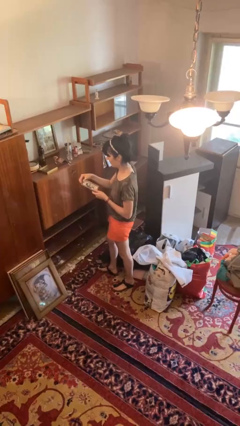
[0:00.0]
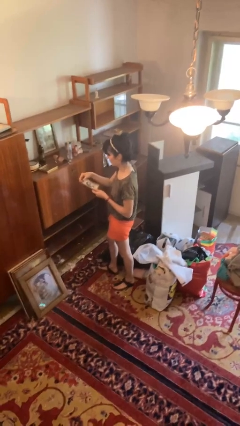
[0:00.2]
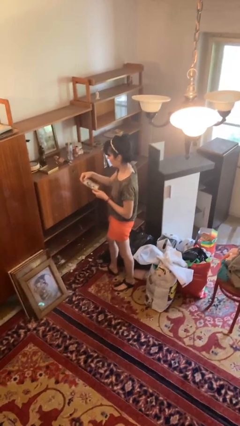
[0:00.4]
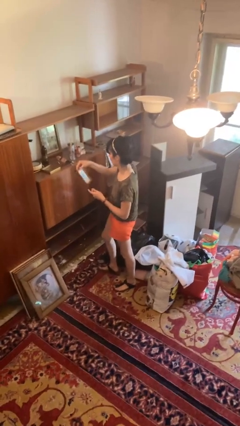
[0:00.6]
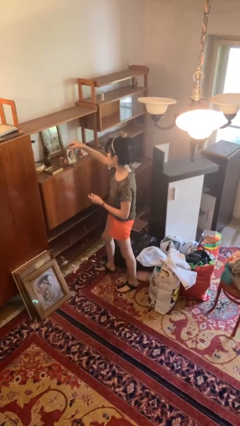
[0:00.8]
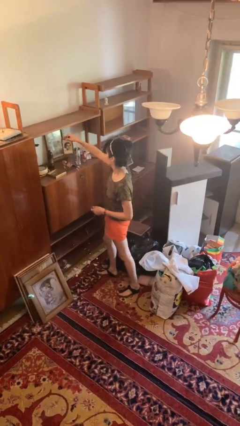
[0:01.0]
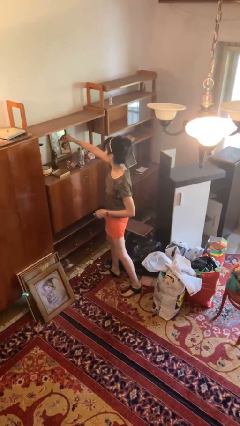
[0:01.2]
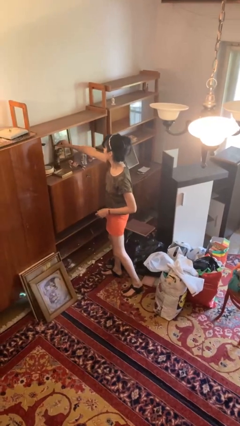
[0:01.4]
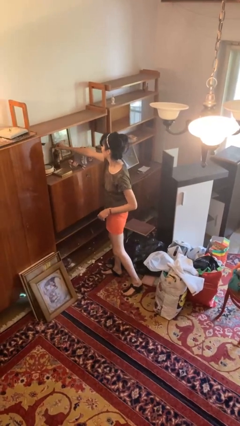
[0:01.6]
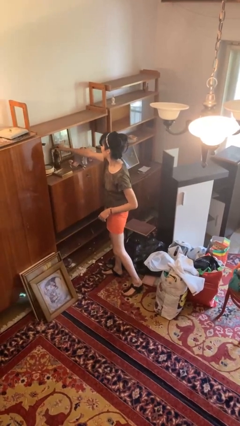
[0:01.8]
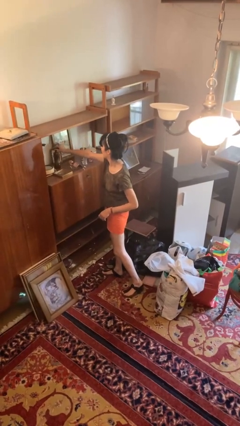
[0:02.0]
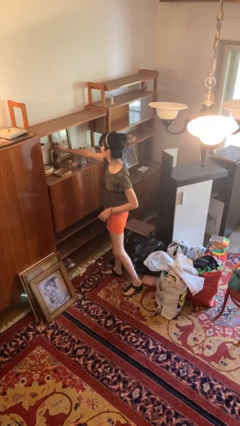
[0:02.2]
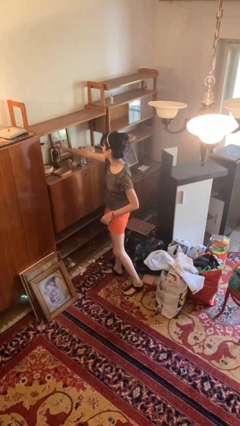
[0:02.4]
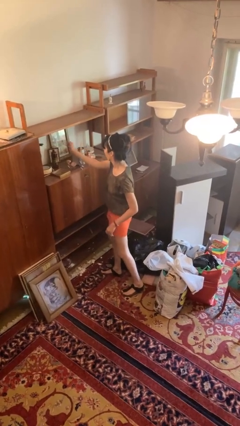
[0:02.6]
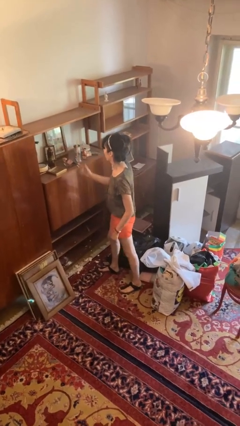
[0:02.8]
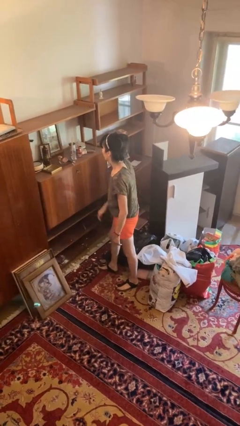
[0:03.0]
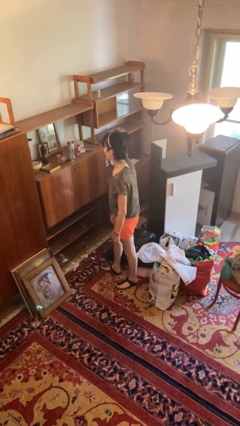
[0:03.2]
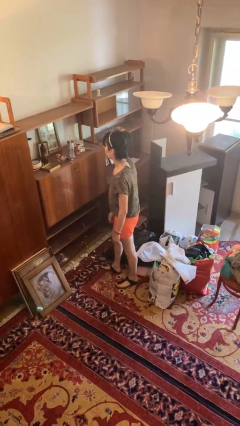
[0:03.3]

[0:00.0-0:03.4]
person puts down object on countertop

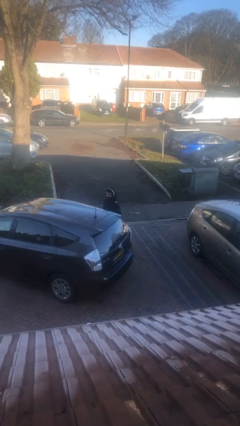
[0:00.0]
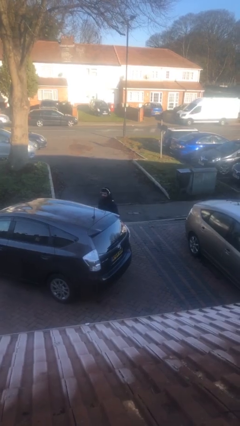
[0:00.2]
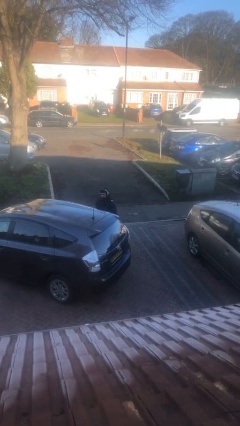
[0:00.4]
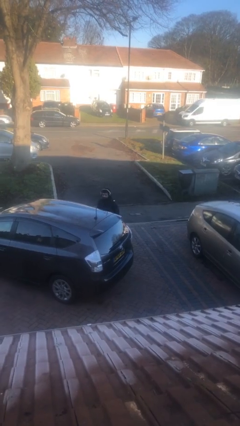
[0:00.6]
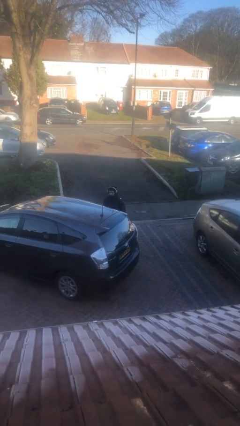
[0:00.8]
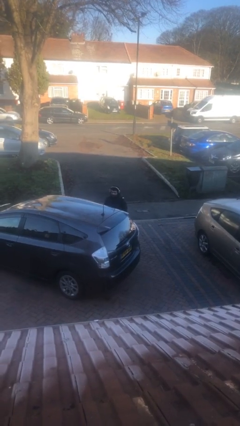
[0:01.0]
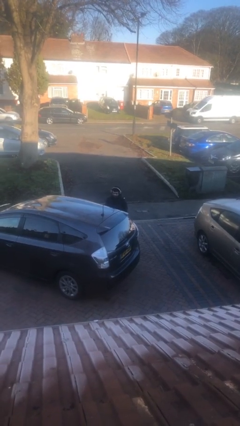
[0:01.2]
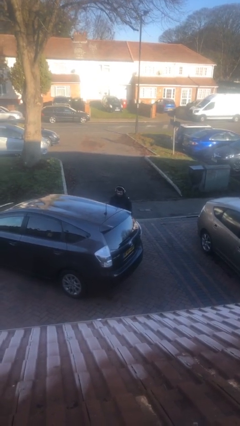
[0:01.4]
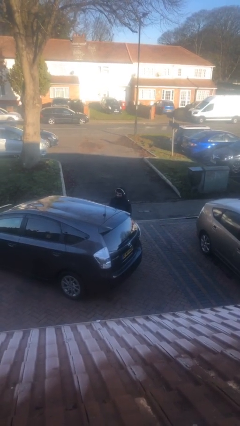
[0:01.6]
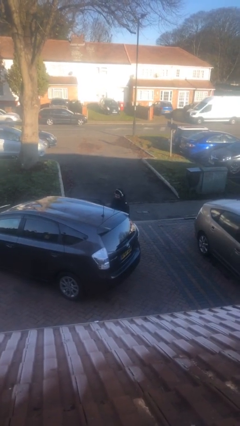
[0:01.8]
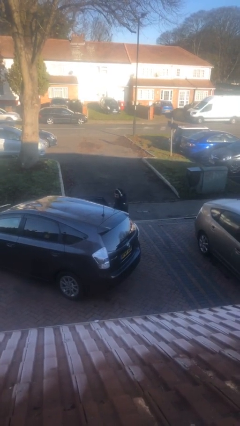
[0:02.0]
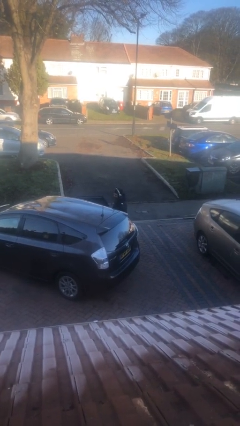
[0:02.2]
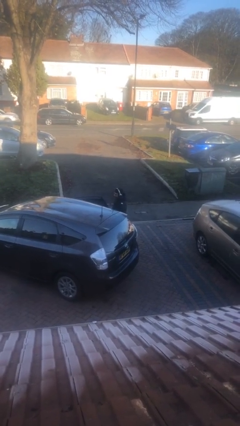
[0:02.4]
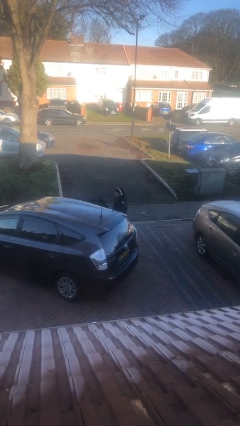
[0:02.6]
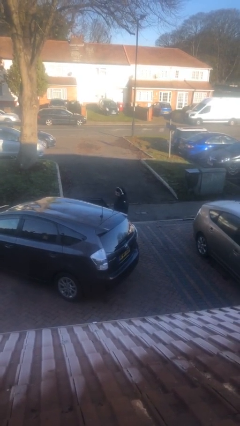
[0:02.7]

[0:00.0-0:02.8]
person opens car door

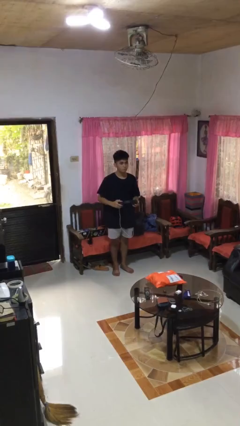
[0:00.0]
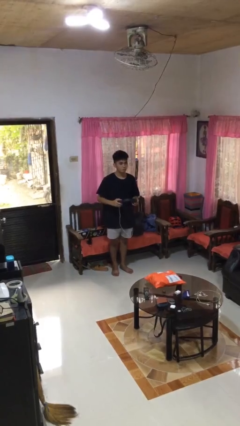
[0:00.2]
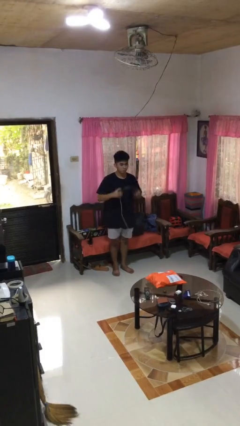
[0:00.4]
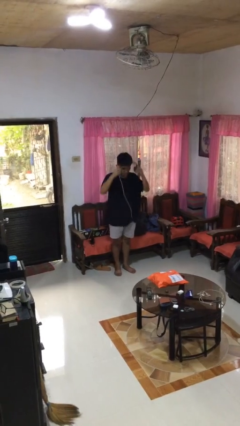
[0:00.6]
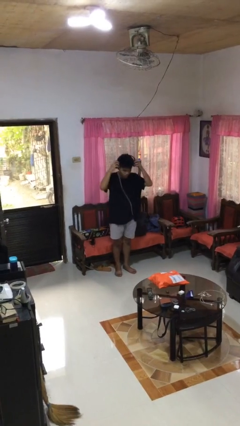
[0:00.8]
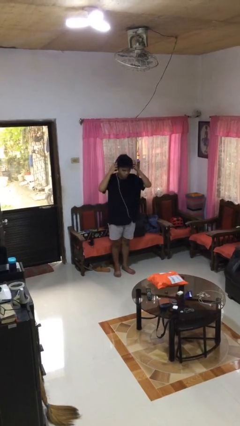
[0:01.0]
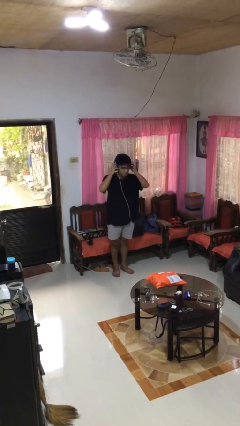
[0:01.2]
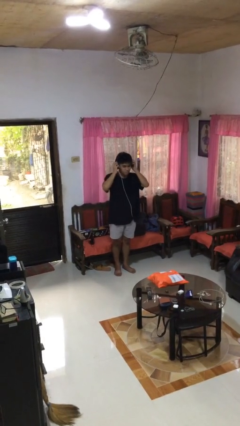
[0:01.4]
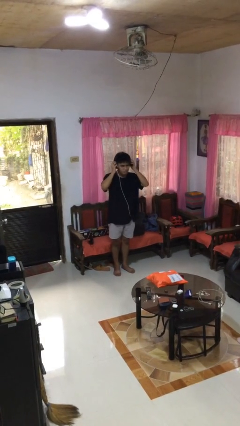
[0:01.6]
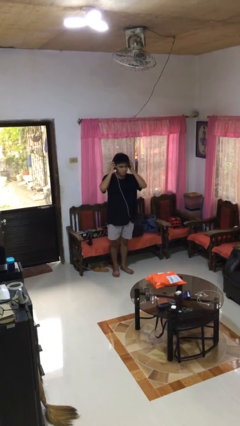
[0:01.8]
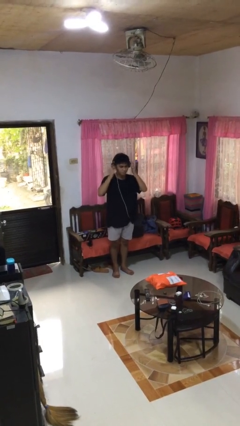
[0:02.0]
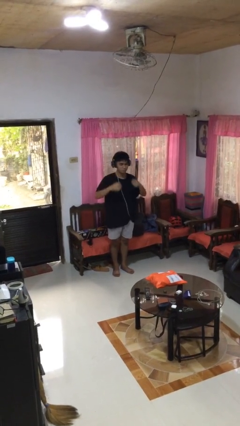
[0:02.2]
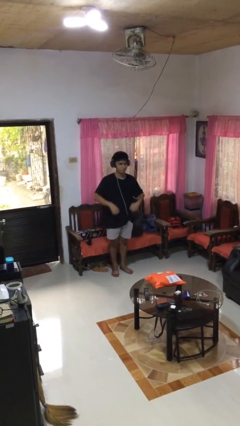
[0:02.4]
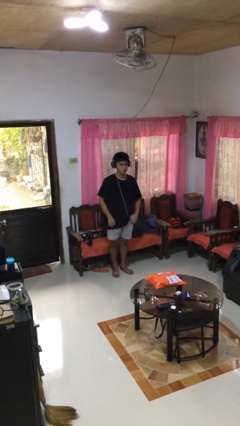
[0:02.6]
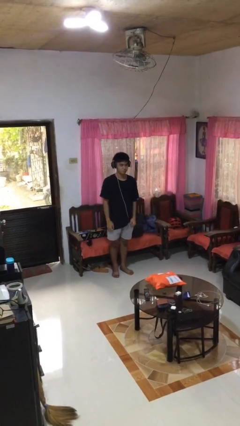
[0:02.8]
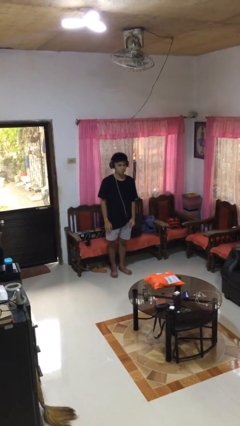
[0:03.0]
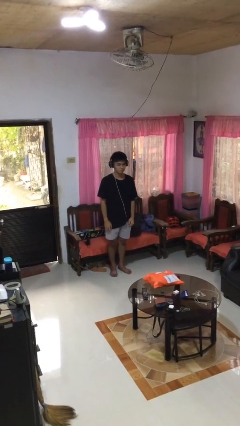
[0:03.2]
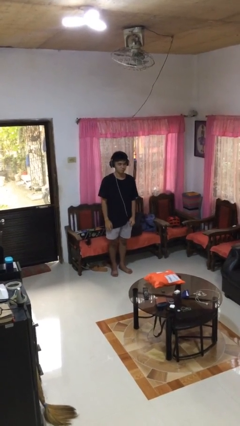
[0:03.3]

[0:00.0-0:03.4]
person puts on headphones

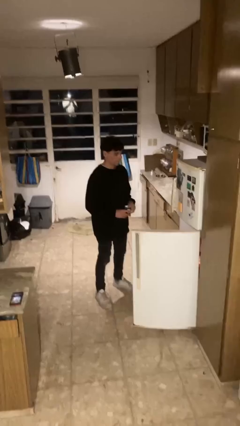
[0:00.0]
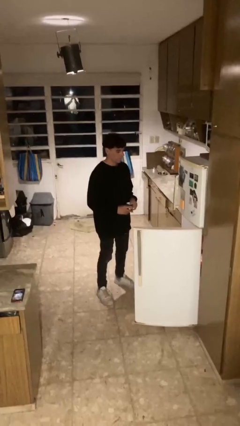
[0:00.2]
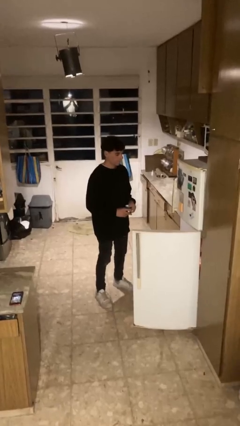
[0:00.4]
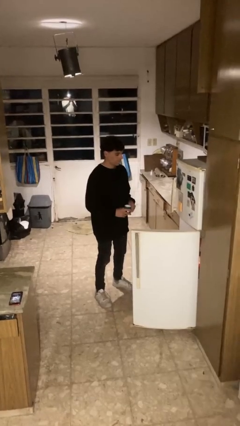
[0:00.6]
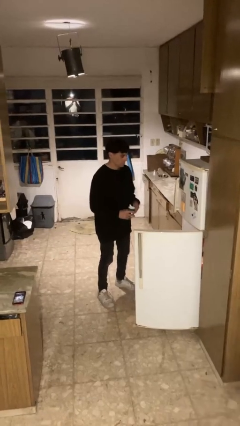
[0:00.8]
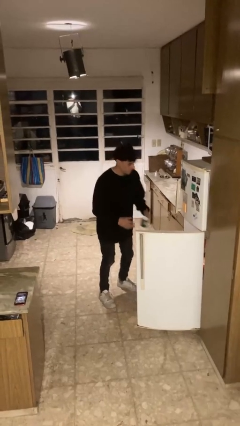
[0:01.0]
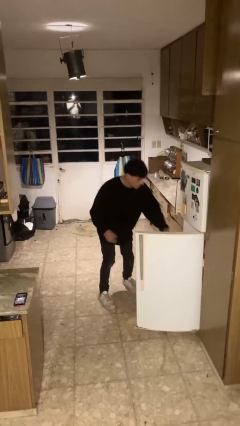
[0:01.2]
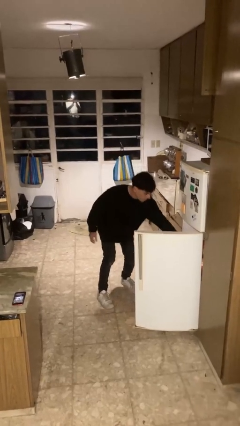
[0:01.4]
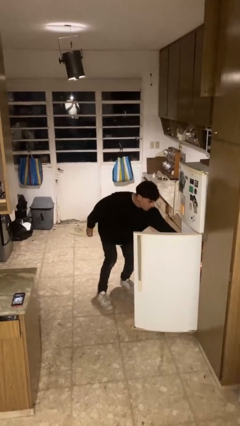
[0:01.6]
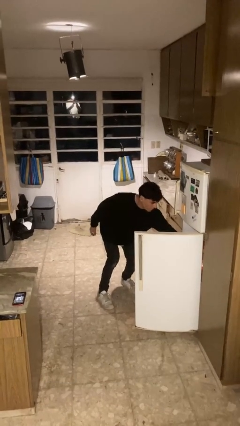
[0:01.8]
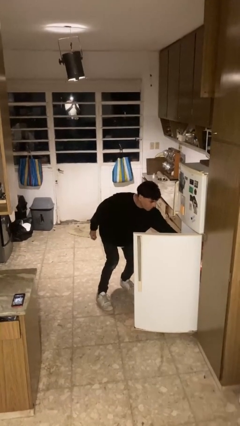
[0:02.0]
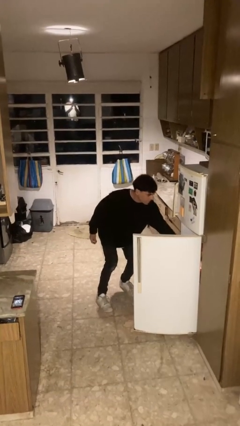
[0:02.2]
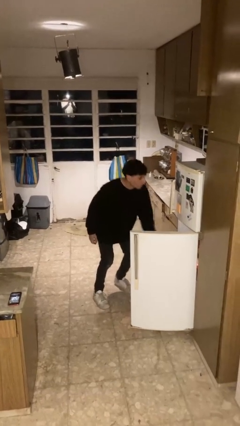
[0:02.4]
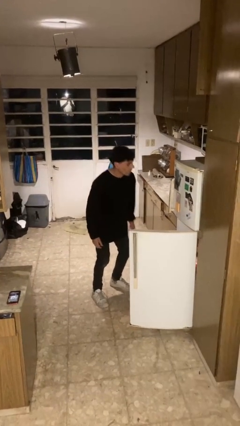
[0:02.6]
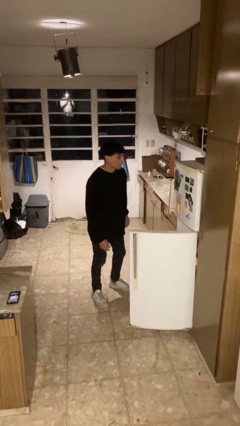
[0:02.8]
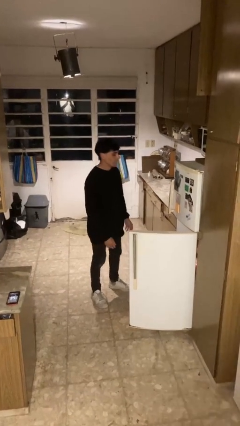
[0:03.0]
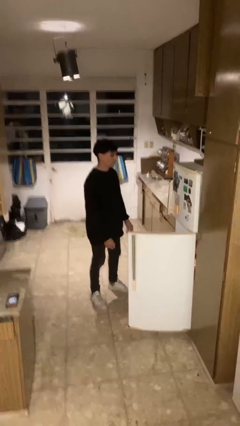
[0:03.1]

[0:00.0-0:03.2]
person puts object into refrigerator

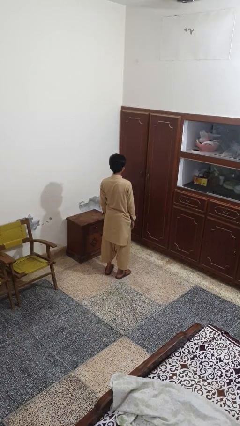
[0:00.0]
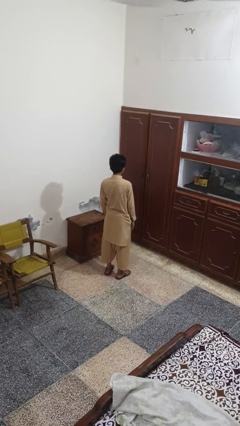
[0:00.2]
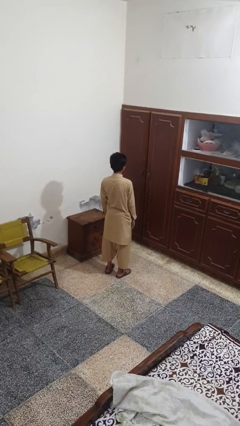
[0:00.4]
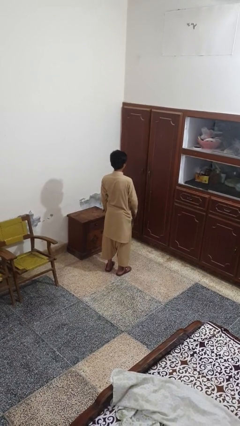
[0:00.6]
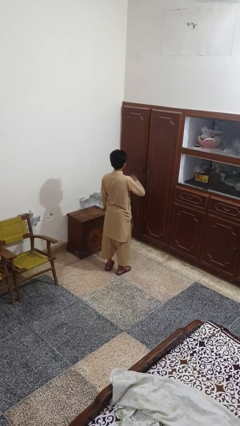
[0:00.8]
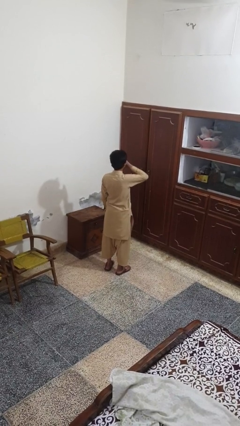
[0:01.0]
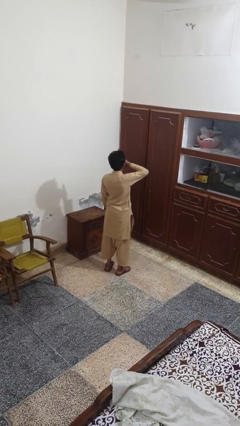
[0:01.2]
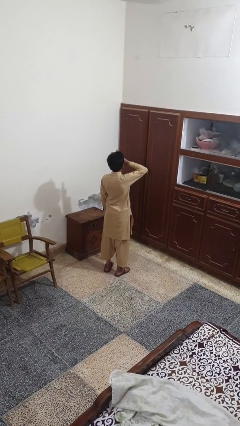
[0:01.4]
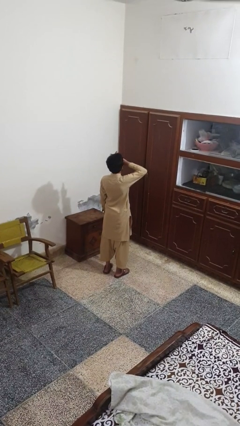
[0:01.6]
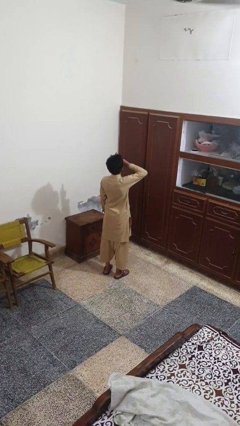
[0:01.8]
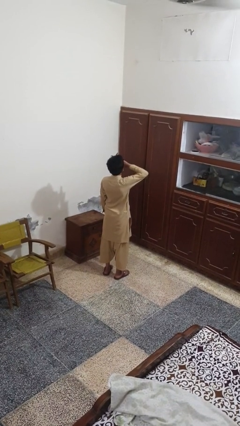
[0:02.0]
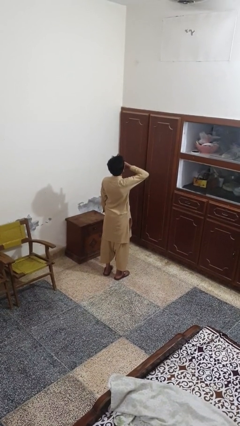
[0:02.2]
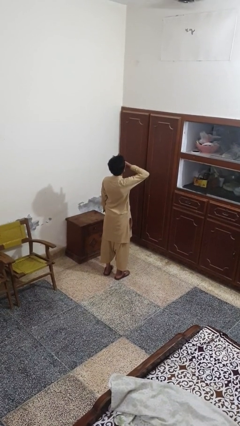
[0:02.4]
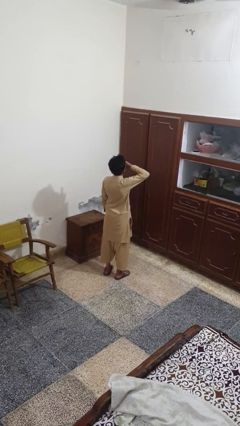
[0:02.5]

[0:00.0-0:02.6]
person yawns

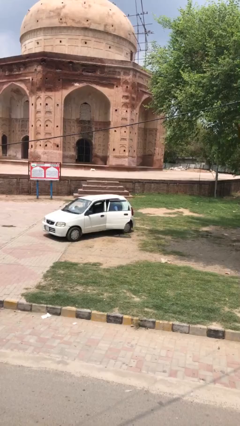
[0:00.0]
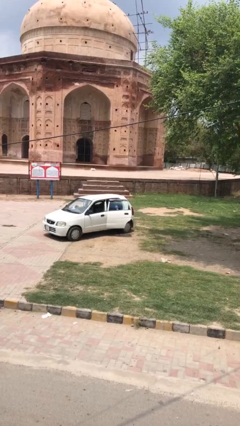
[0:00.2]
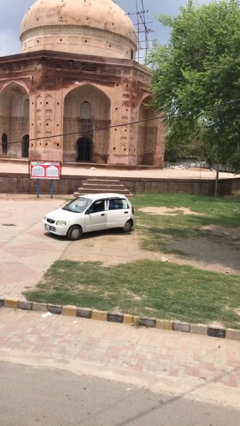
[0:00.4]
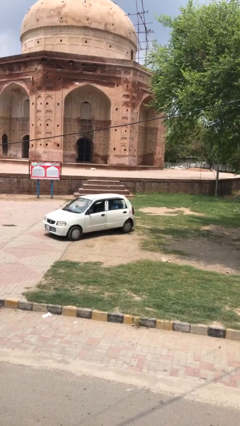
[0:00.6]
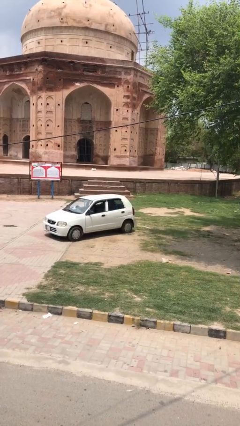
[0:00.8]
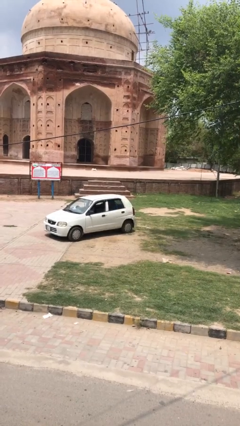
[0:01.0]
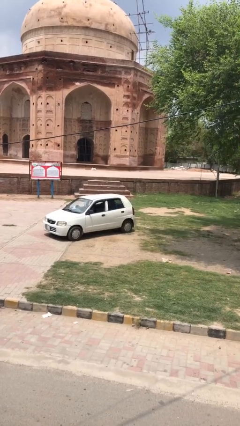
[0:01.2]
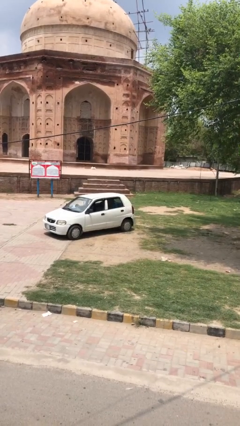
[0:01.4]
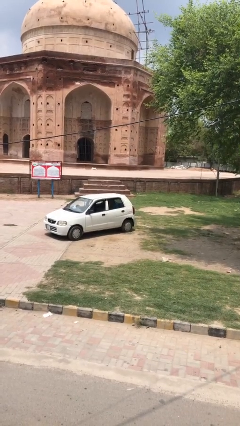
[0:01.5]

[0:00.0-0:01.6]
person closes car door

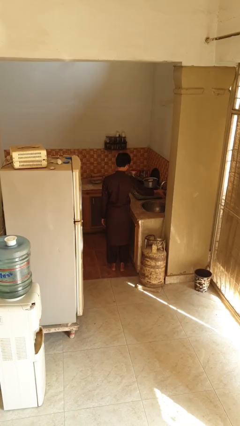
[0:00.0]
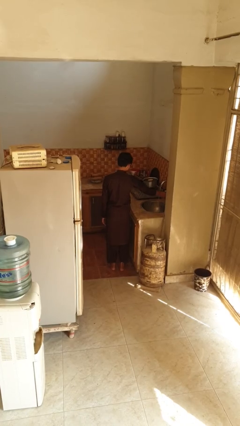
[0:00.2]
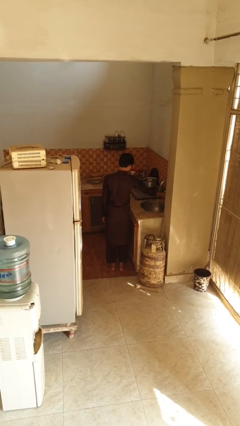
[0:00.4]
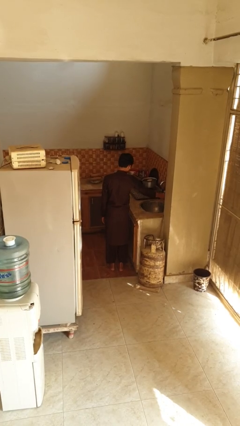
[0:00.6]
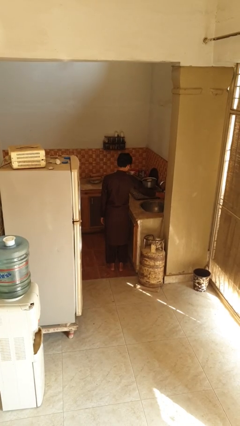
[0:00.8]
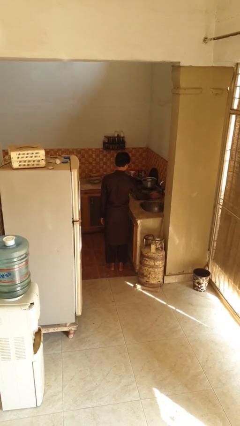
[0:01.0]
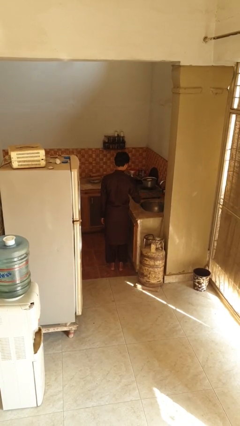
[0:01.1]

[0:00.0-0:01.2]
person turns off faucet
